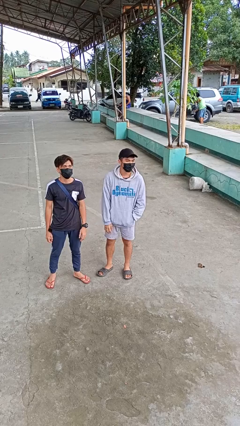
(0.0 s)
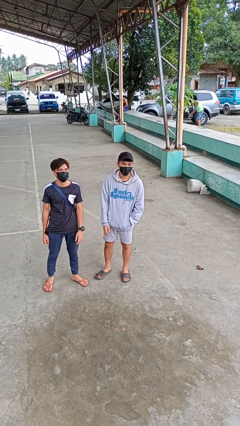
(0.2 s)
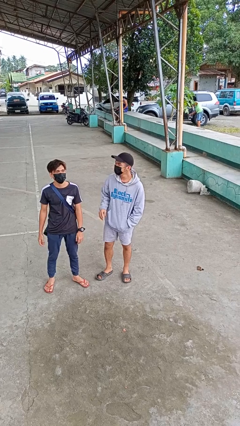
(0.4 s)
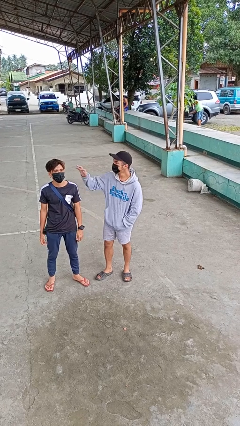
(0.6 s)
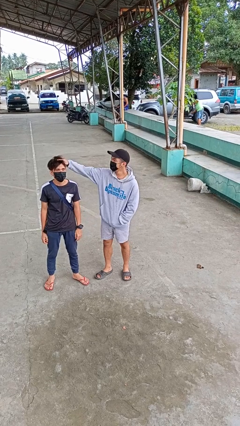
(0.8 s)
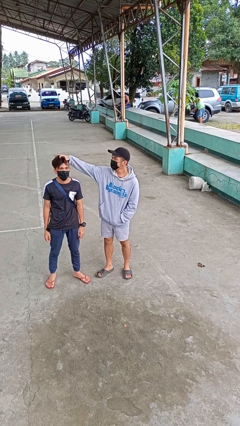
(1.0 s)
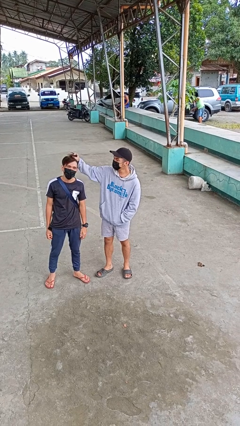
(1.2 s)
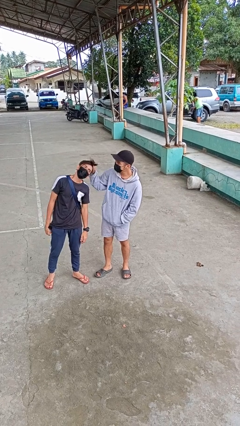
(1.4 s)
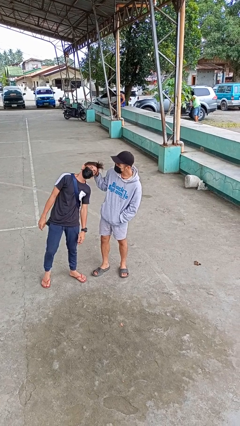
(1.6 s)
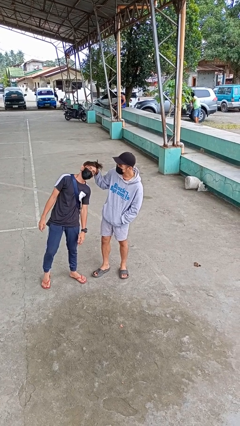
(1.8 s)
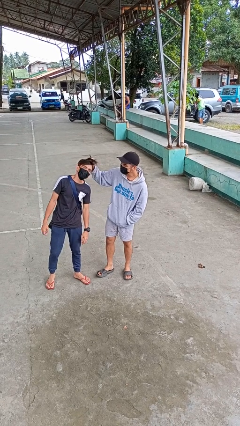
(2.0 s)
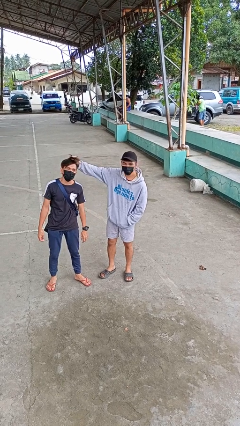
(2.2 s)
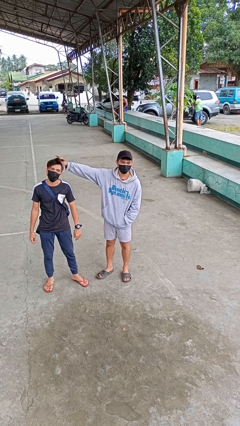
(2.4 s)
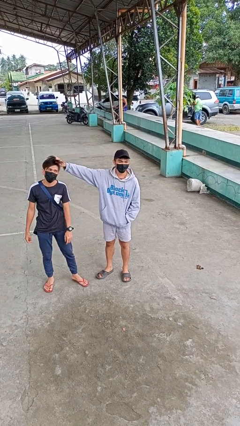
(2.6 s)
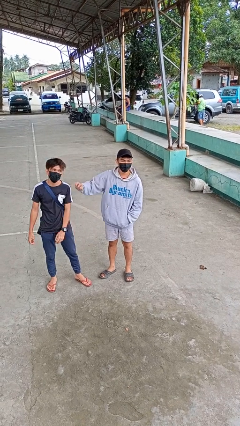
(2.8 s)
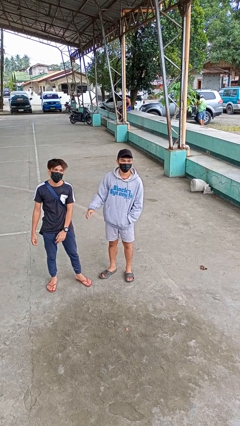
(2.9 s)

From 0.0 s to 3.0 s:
person grabs person by hair

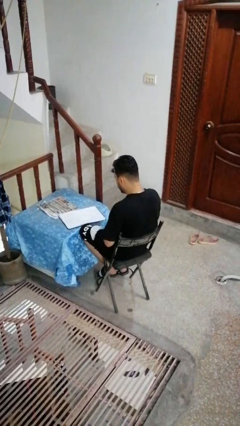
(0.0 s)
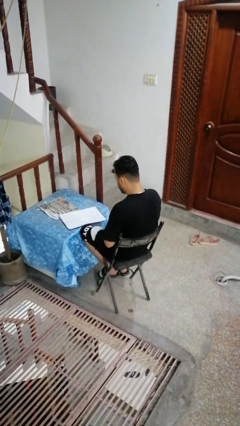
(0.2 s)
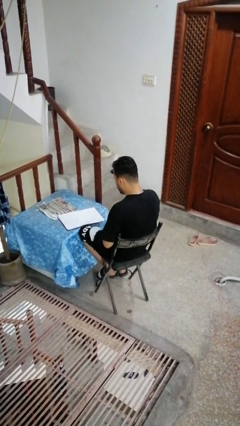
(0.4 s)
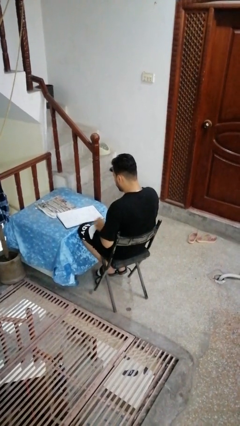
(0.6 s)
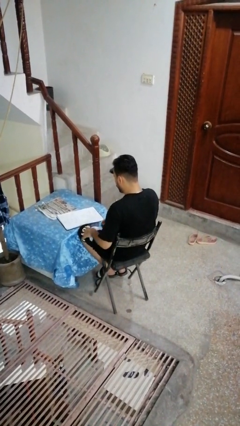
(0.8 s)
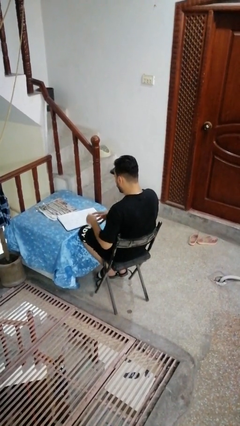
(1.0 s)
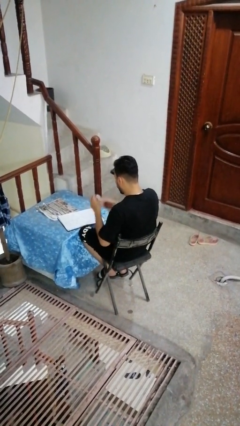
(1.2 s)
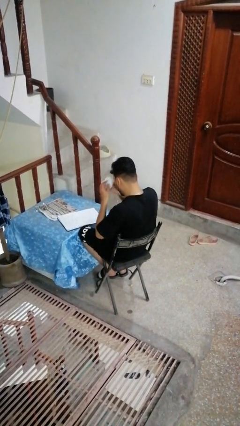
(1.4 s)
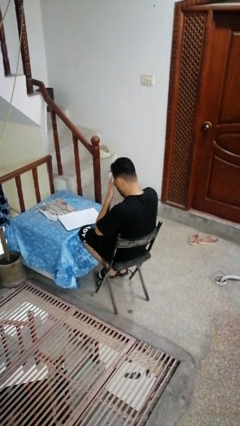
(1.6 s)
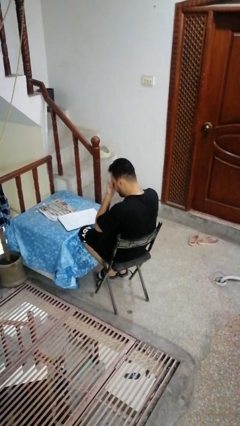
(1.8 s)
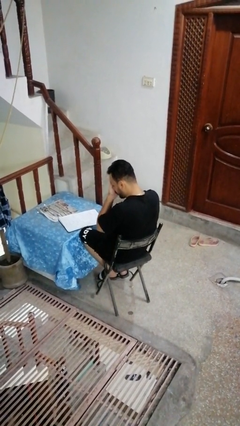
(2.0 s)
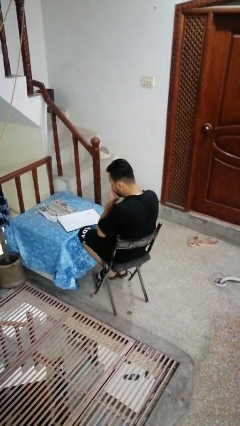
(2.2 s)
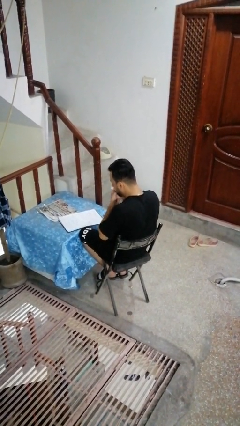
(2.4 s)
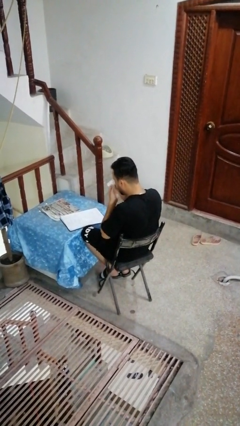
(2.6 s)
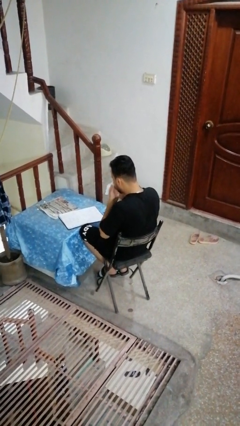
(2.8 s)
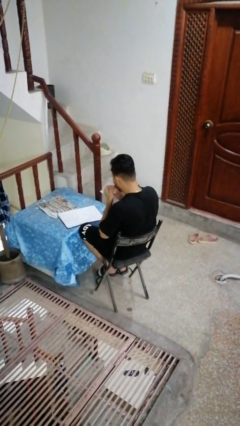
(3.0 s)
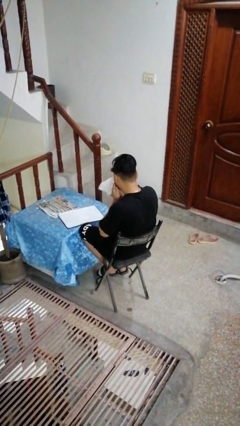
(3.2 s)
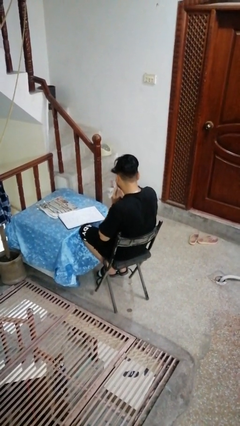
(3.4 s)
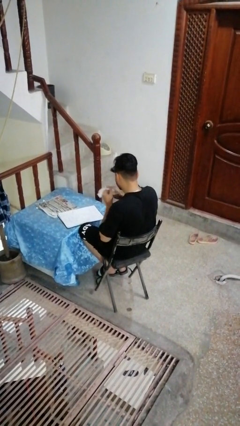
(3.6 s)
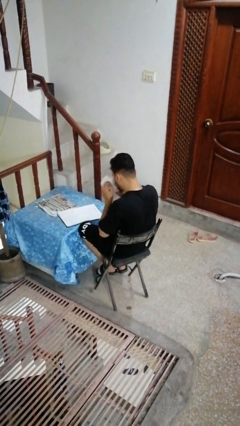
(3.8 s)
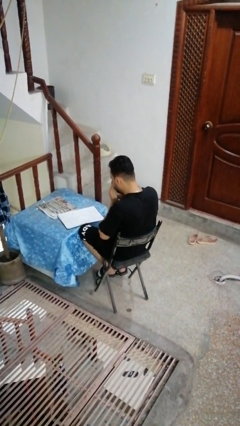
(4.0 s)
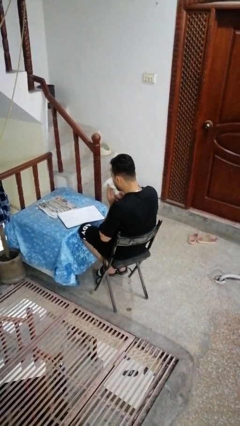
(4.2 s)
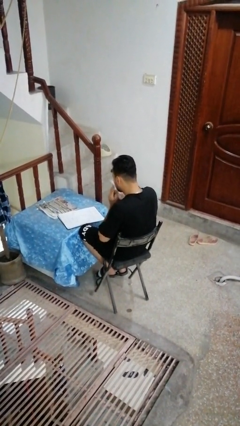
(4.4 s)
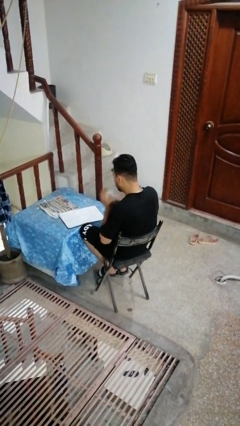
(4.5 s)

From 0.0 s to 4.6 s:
person wipes mouth with napkin

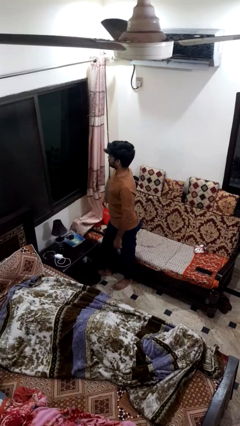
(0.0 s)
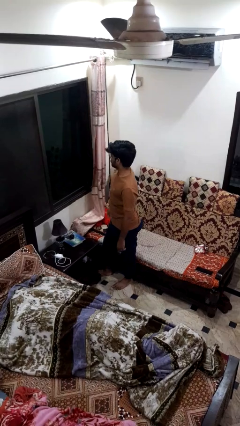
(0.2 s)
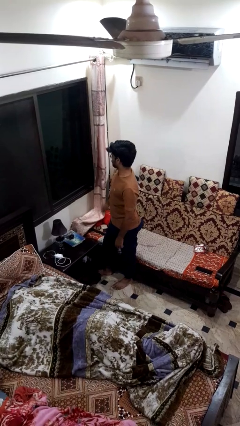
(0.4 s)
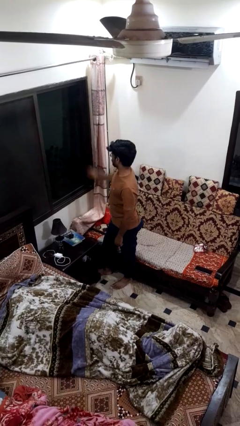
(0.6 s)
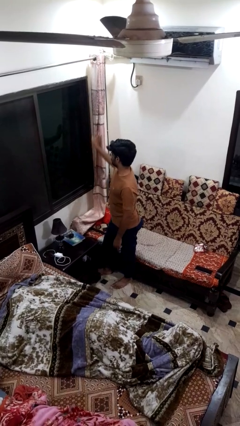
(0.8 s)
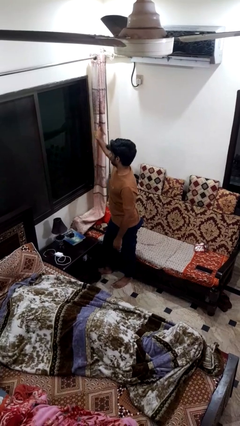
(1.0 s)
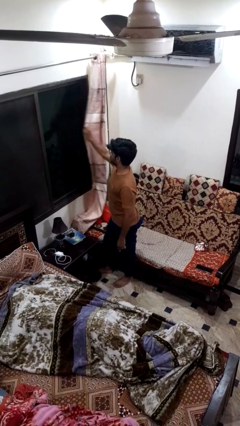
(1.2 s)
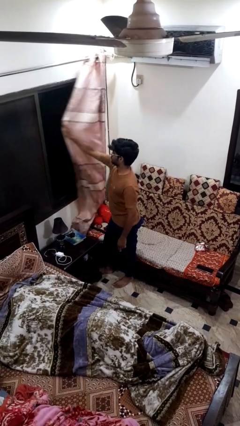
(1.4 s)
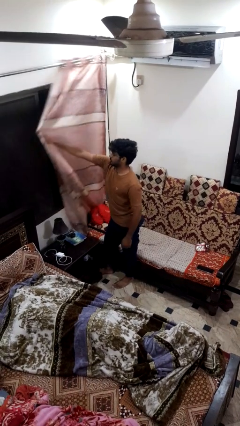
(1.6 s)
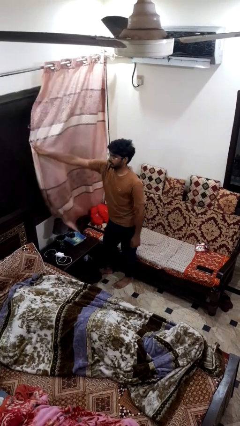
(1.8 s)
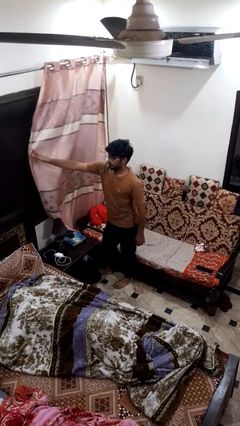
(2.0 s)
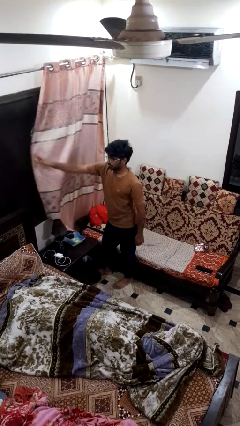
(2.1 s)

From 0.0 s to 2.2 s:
person closes curtains

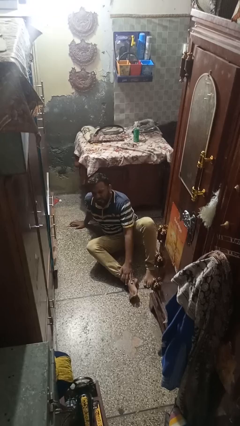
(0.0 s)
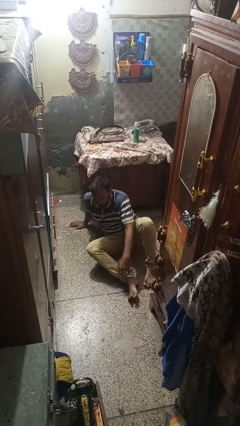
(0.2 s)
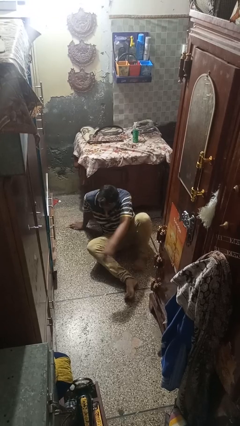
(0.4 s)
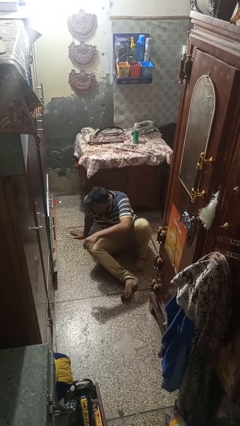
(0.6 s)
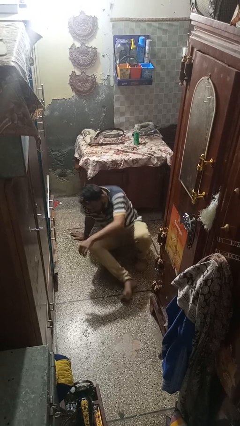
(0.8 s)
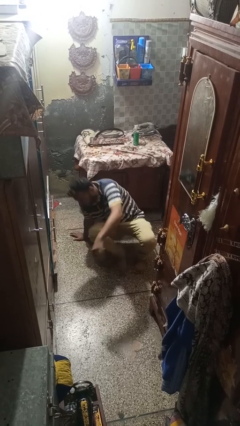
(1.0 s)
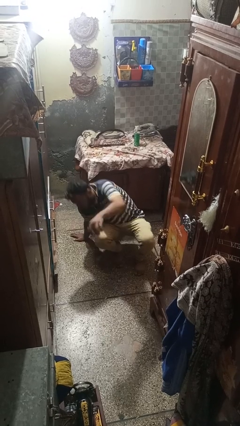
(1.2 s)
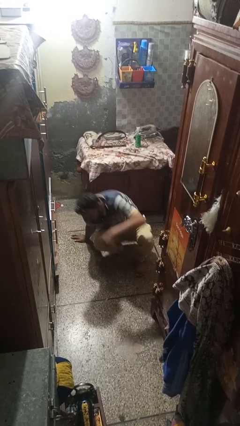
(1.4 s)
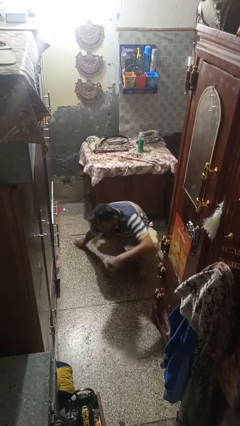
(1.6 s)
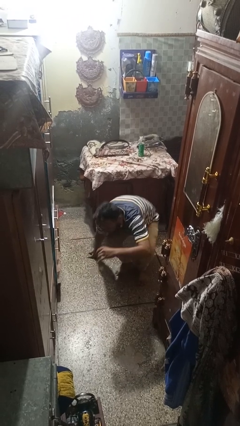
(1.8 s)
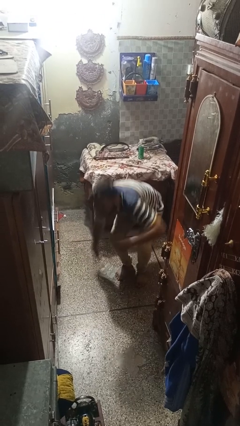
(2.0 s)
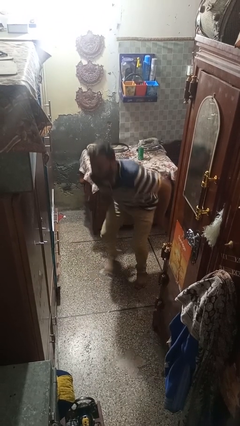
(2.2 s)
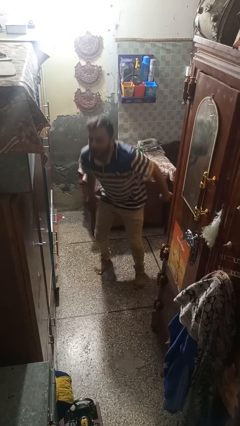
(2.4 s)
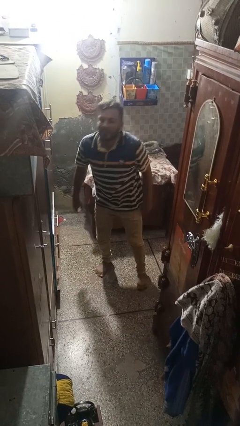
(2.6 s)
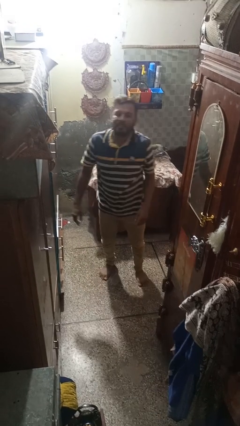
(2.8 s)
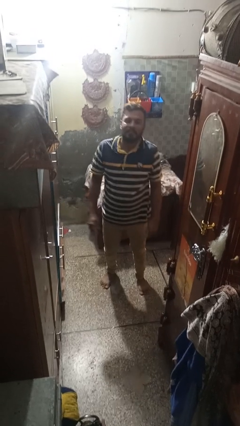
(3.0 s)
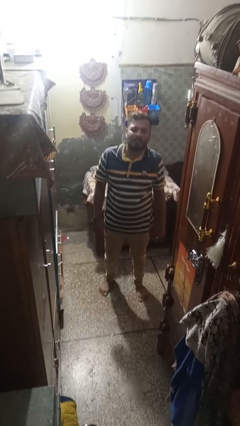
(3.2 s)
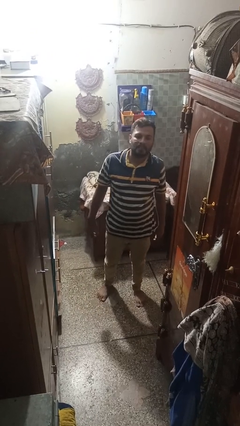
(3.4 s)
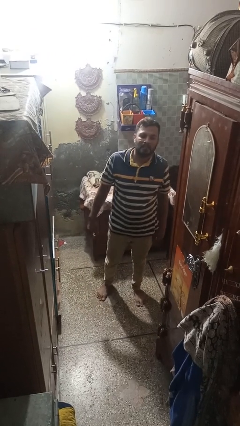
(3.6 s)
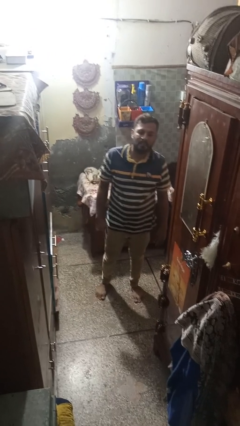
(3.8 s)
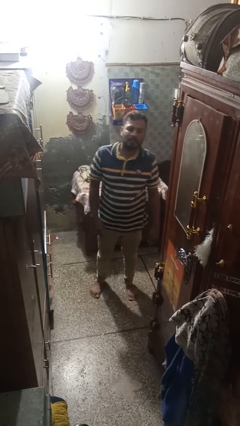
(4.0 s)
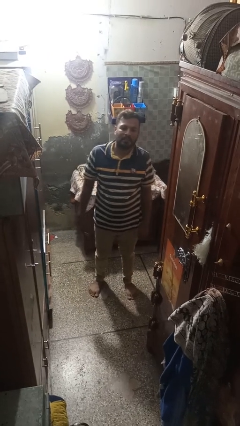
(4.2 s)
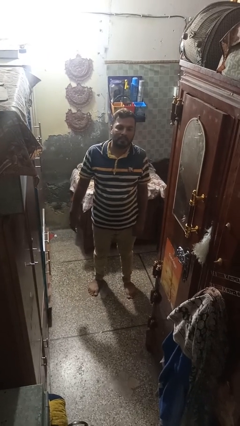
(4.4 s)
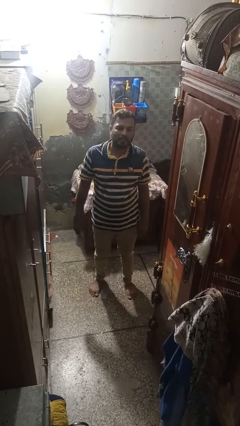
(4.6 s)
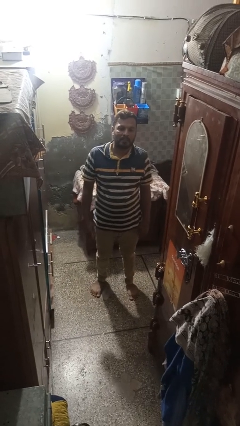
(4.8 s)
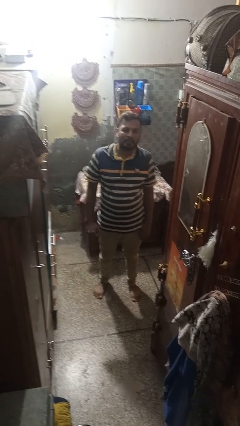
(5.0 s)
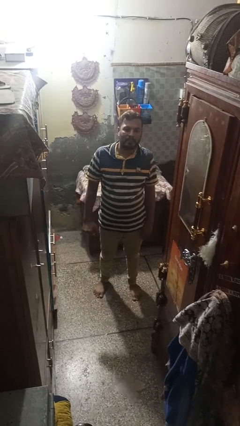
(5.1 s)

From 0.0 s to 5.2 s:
person stands up from floor

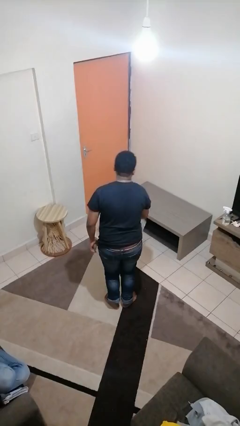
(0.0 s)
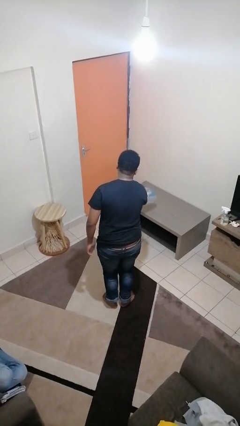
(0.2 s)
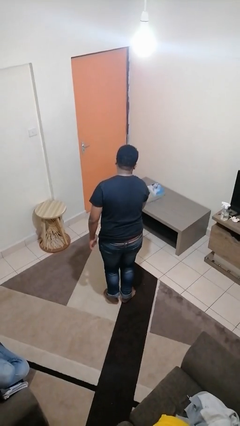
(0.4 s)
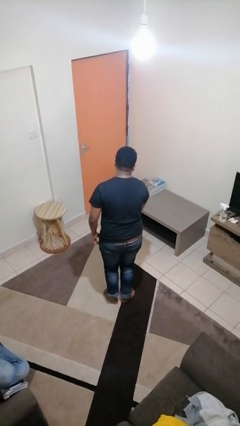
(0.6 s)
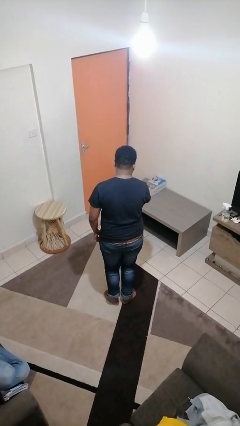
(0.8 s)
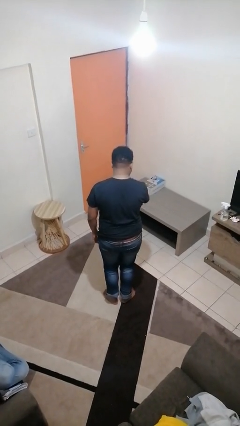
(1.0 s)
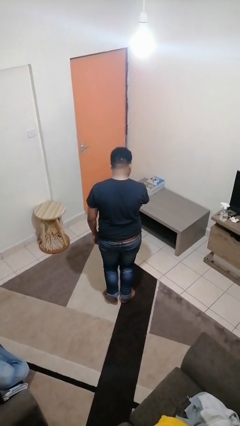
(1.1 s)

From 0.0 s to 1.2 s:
person throws object on table

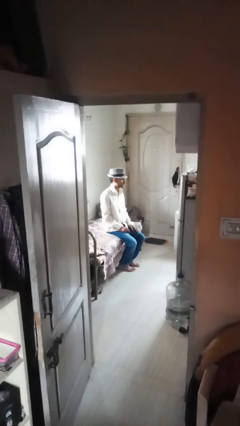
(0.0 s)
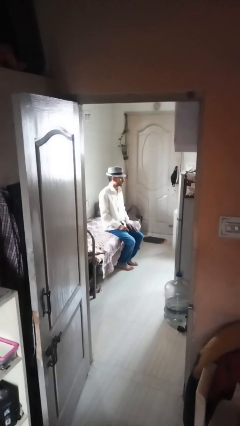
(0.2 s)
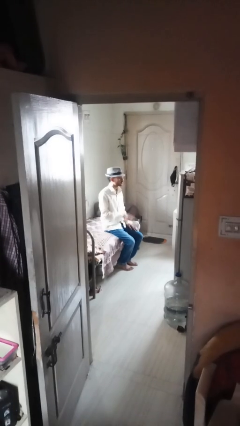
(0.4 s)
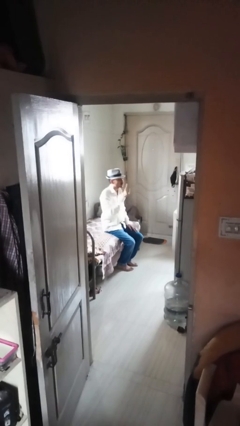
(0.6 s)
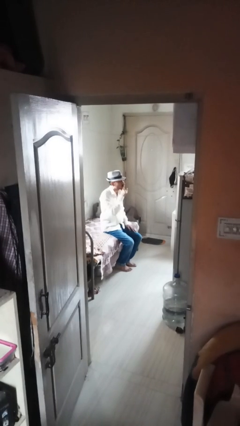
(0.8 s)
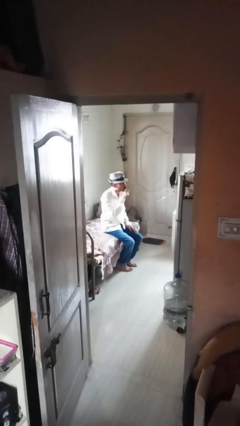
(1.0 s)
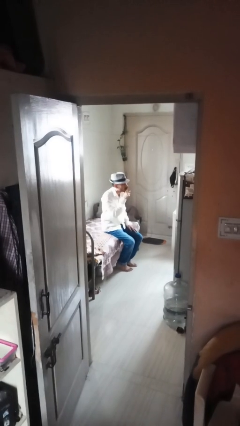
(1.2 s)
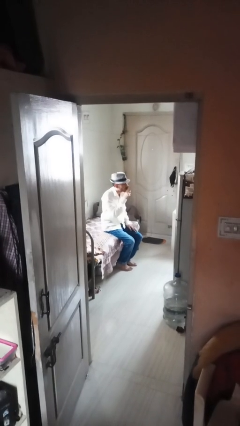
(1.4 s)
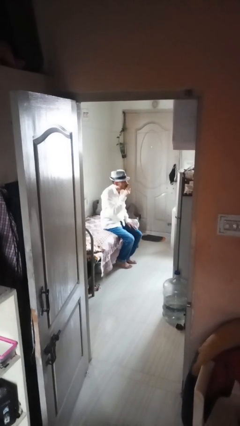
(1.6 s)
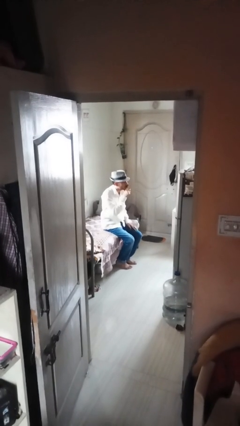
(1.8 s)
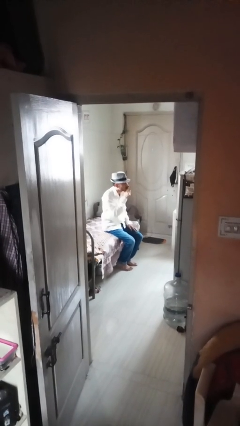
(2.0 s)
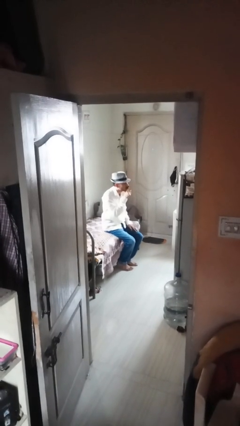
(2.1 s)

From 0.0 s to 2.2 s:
person gestures be quiet
